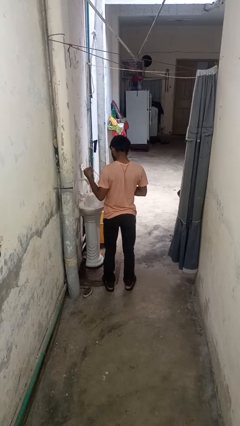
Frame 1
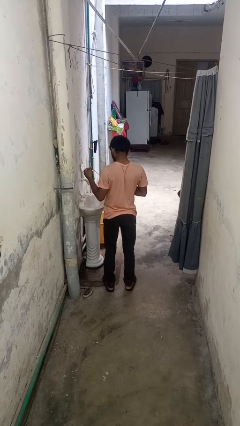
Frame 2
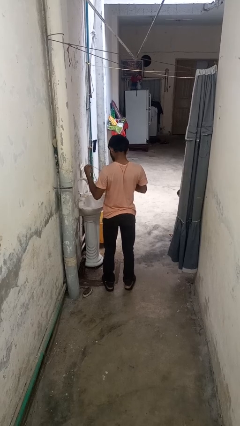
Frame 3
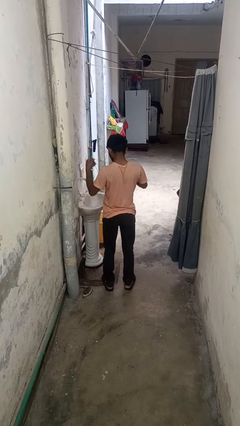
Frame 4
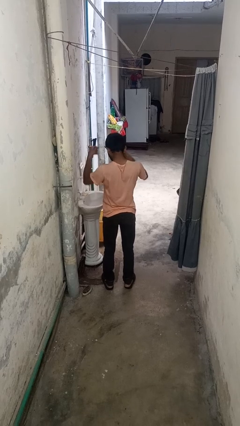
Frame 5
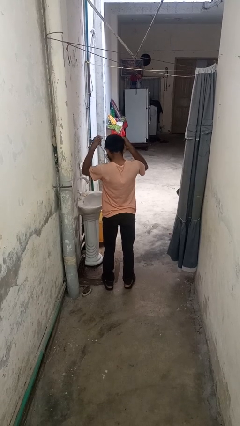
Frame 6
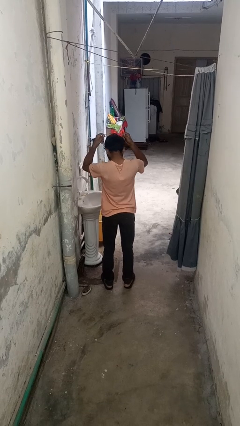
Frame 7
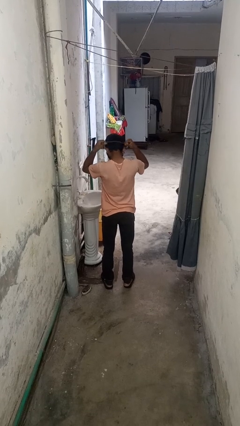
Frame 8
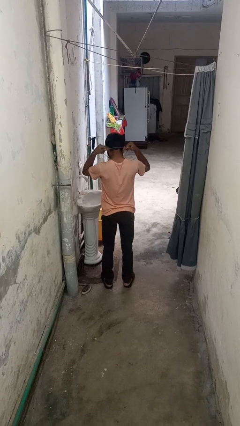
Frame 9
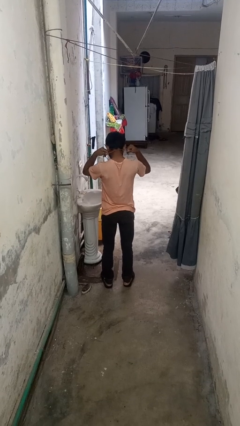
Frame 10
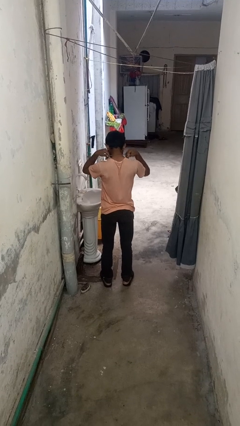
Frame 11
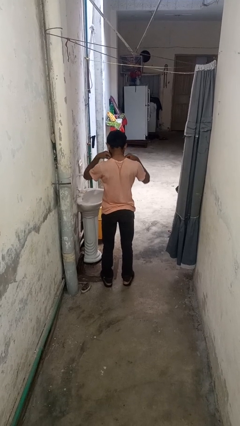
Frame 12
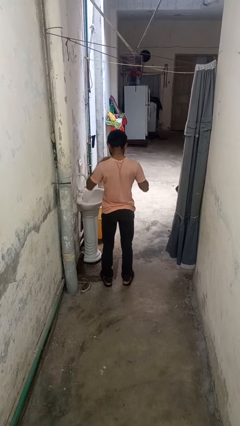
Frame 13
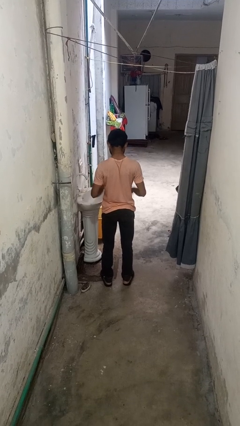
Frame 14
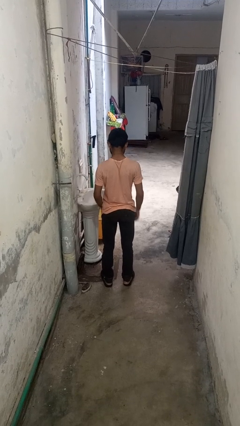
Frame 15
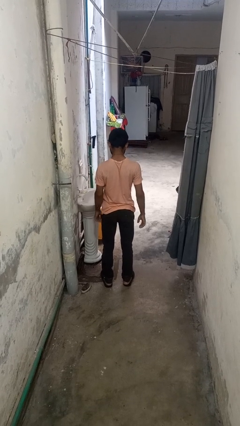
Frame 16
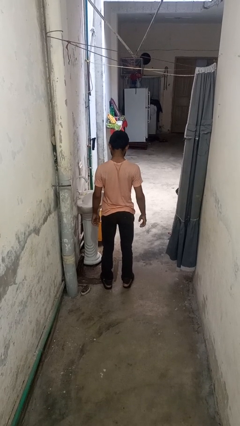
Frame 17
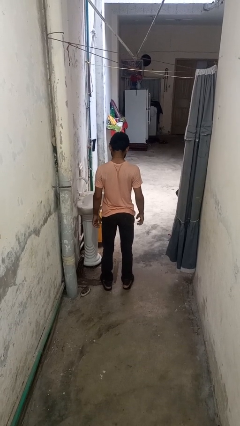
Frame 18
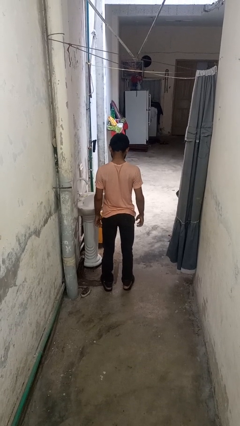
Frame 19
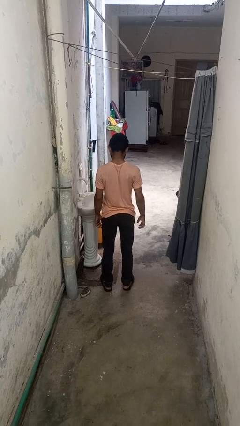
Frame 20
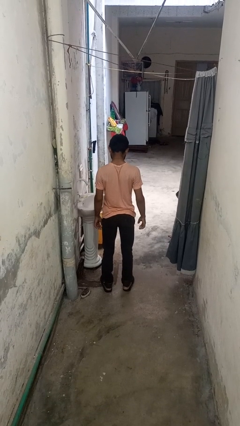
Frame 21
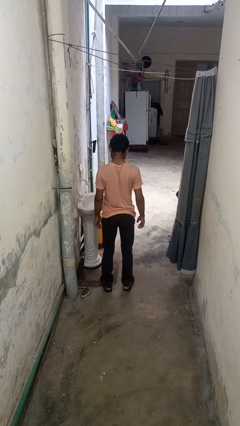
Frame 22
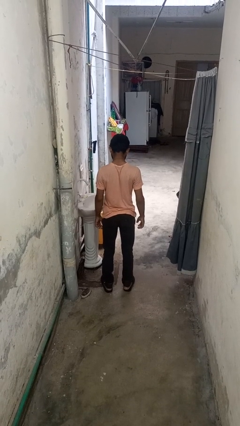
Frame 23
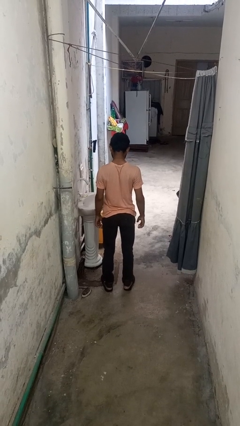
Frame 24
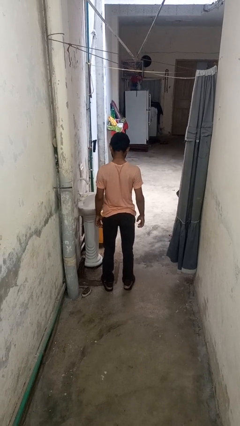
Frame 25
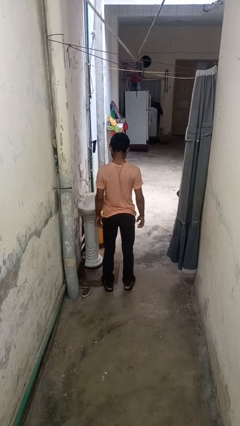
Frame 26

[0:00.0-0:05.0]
person puts on necklace

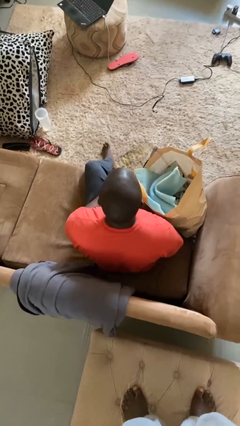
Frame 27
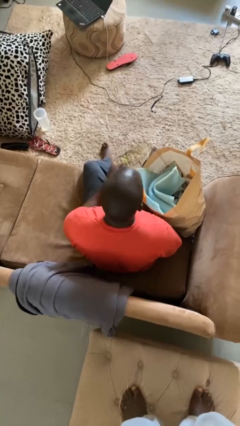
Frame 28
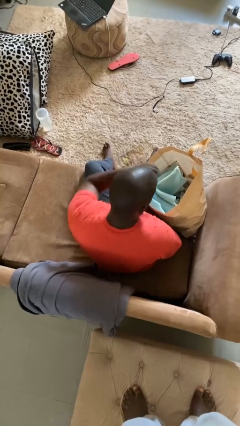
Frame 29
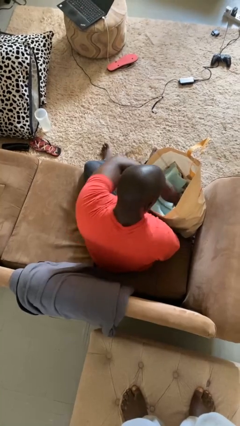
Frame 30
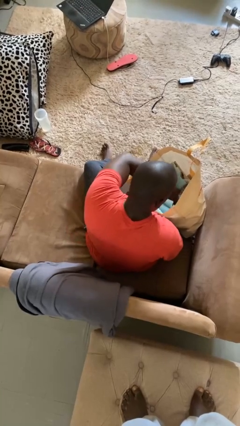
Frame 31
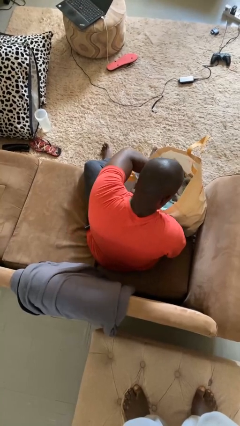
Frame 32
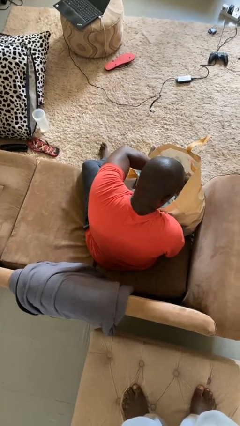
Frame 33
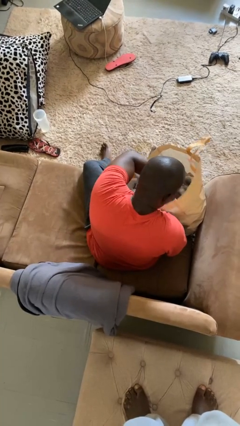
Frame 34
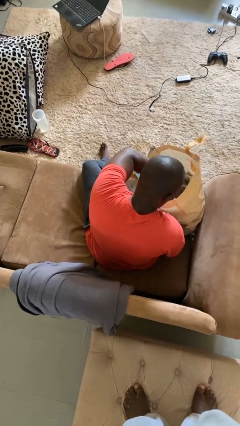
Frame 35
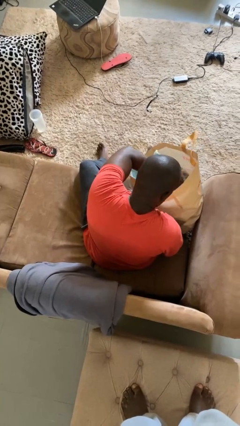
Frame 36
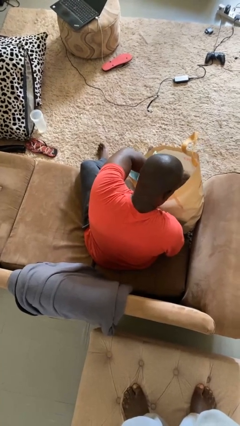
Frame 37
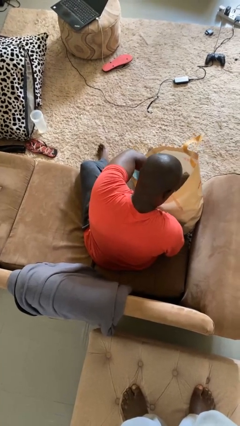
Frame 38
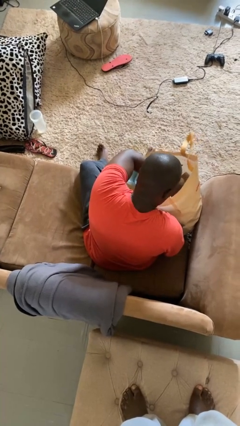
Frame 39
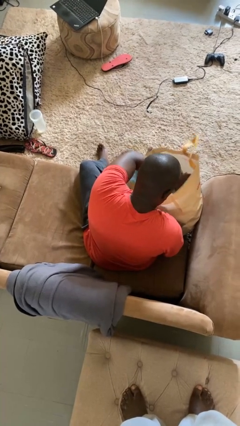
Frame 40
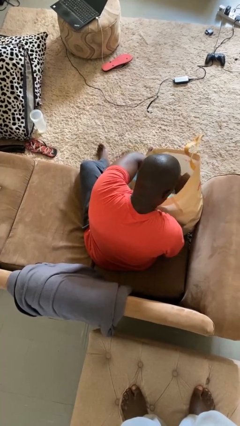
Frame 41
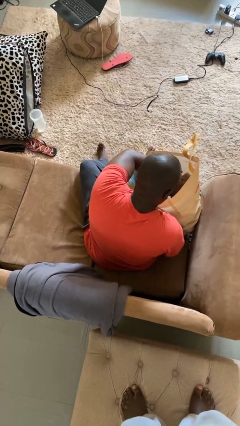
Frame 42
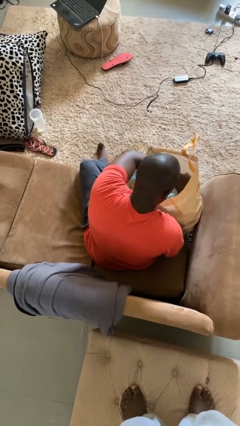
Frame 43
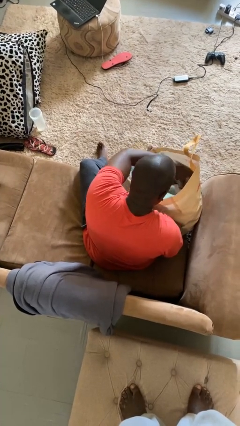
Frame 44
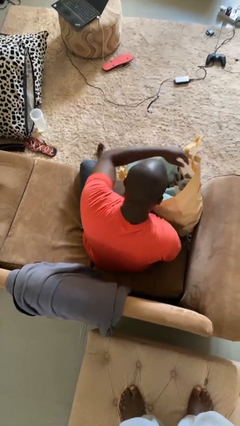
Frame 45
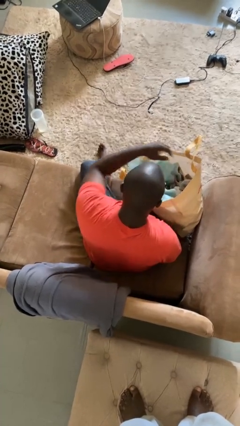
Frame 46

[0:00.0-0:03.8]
person searches in bag

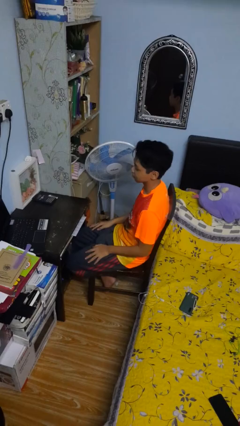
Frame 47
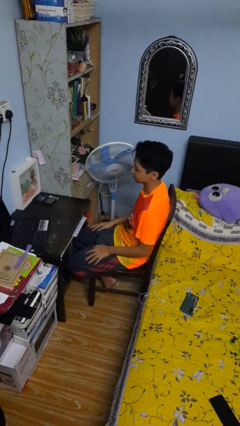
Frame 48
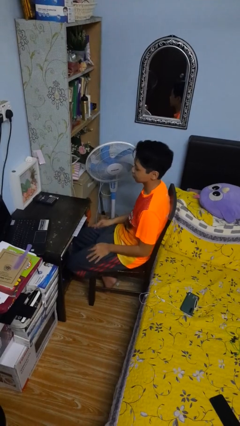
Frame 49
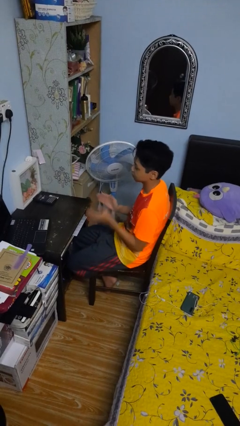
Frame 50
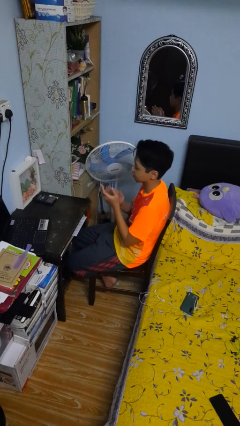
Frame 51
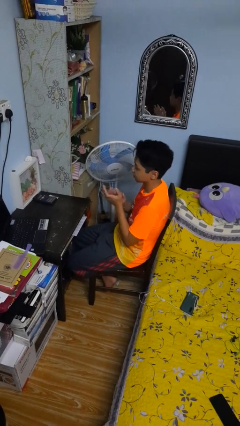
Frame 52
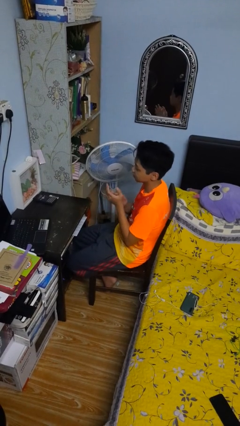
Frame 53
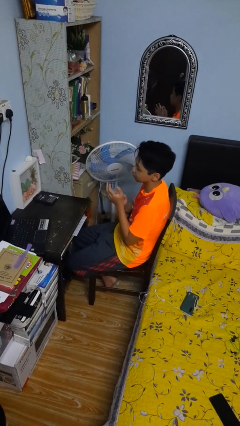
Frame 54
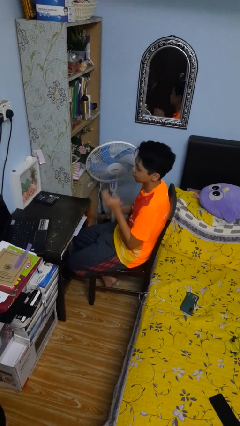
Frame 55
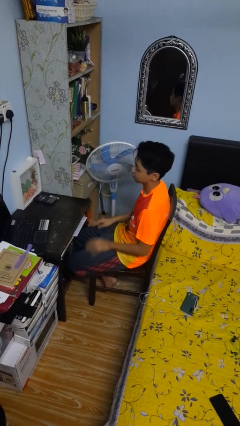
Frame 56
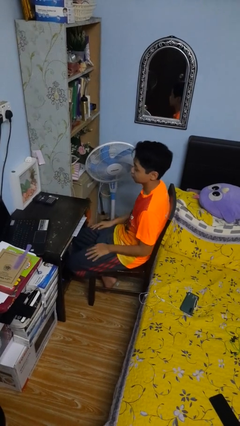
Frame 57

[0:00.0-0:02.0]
person claps hands

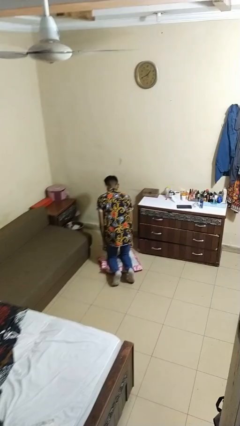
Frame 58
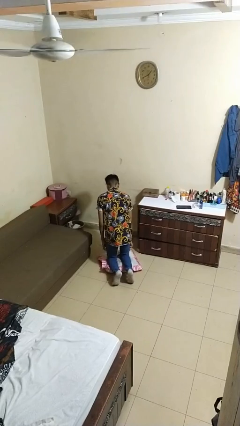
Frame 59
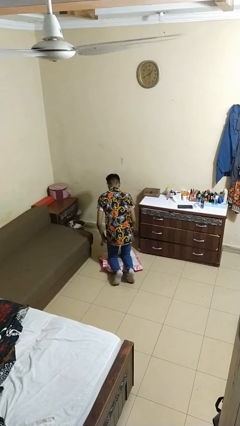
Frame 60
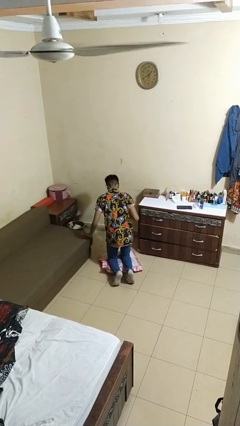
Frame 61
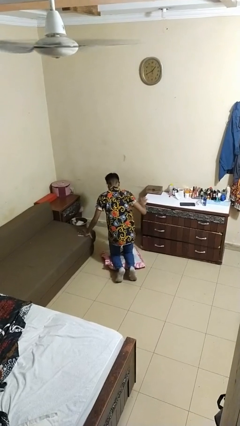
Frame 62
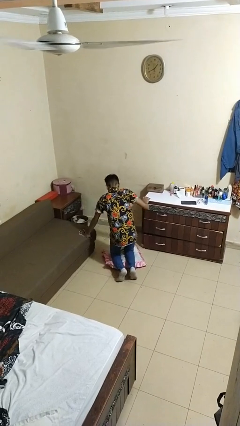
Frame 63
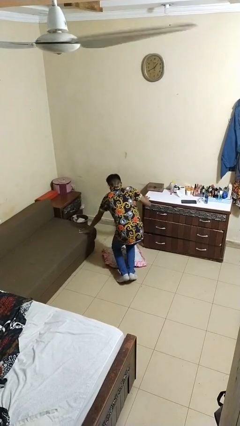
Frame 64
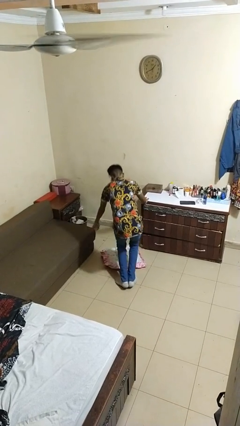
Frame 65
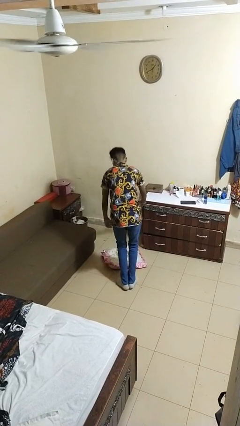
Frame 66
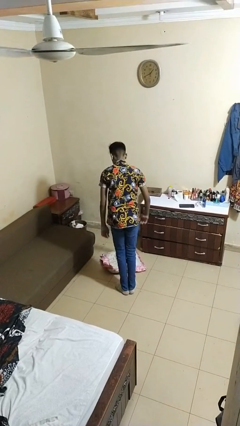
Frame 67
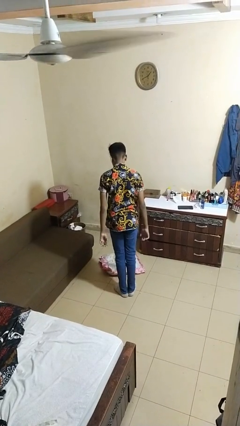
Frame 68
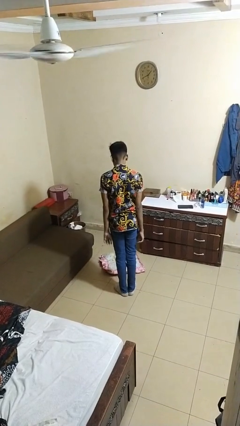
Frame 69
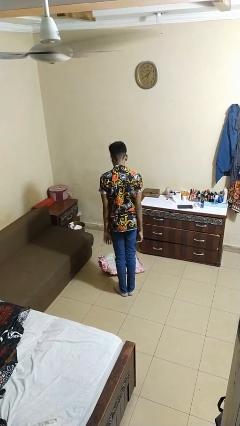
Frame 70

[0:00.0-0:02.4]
person stands up from floor

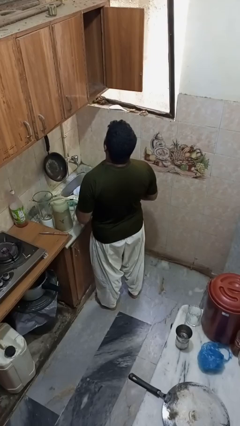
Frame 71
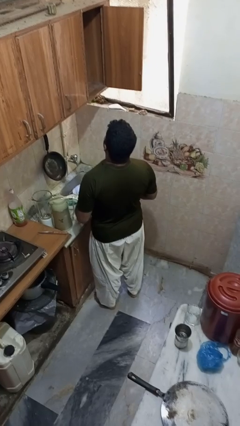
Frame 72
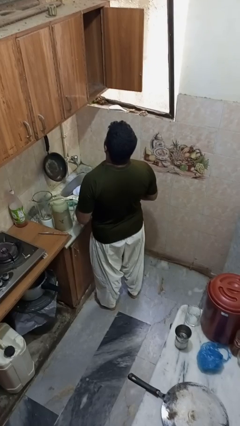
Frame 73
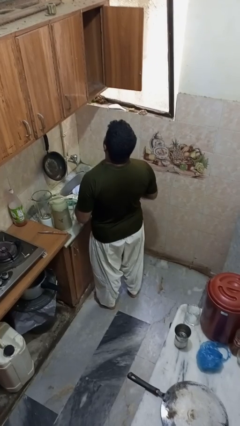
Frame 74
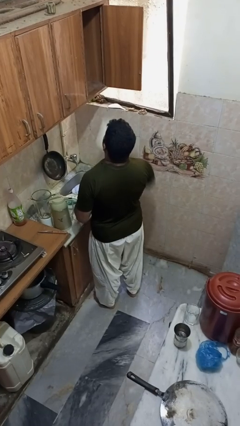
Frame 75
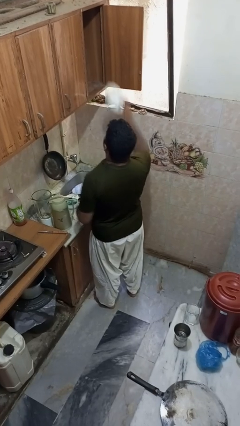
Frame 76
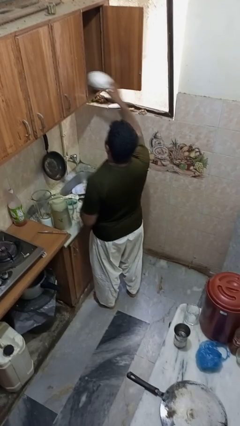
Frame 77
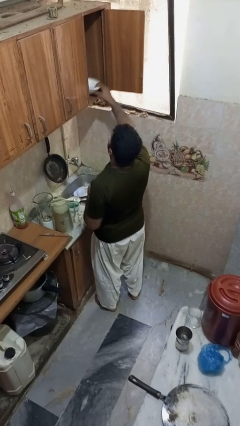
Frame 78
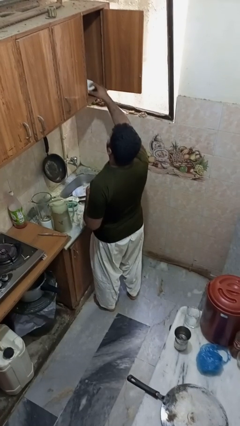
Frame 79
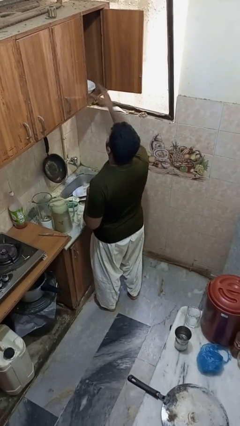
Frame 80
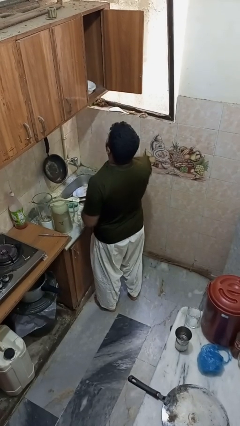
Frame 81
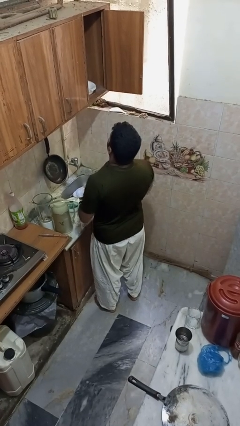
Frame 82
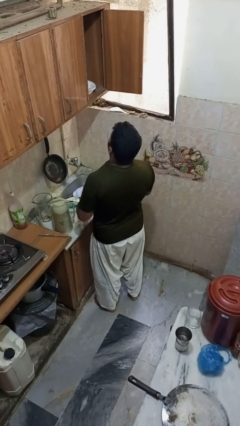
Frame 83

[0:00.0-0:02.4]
person puts object in cabinet

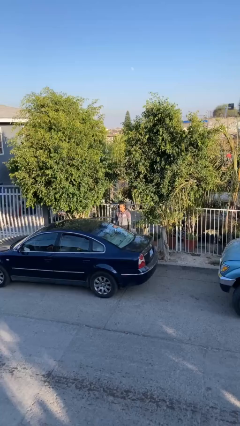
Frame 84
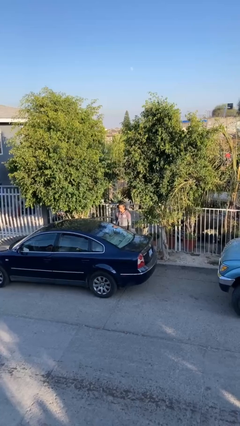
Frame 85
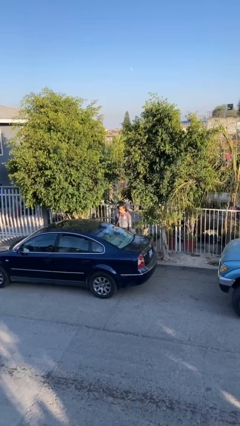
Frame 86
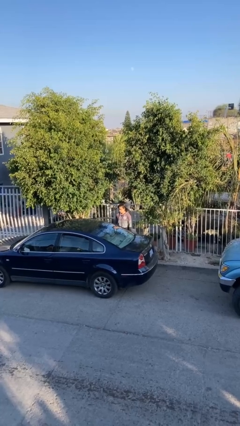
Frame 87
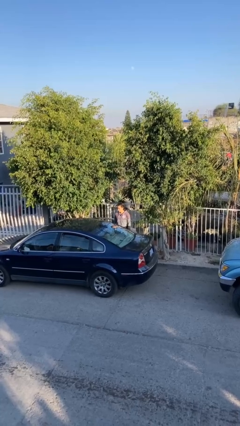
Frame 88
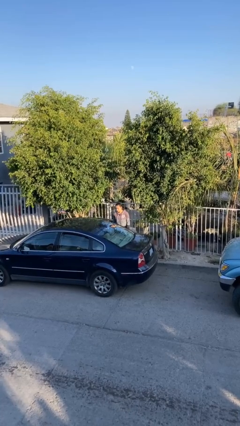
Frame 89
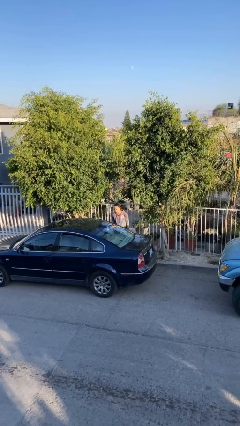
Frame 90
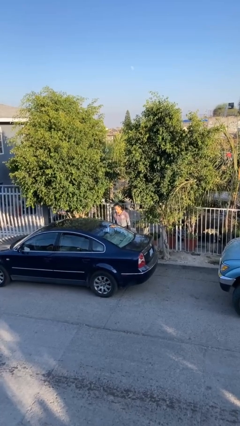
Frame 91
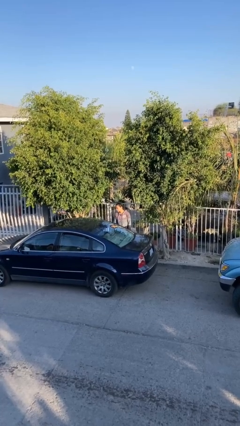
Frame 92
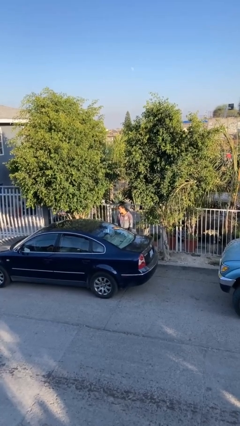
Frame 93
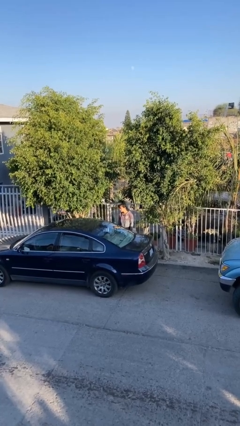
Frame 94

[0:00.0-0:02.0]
person closes car door
